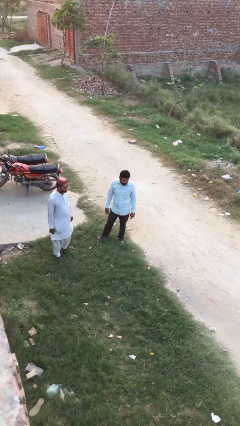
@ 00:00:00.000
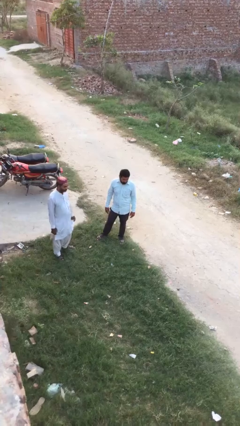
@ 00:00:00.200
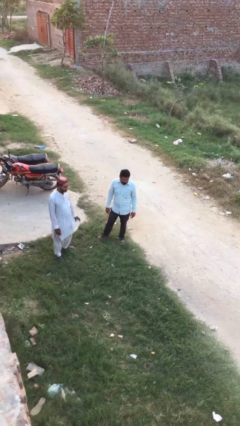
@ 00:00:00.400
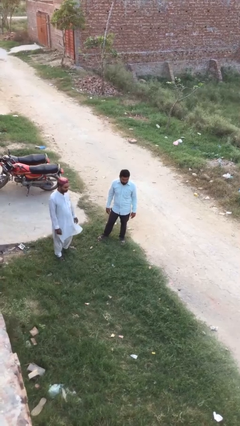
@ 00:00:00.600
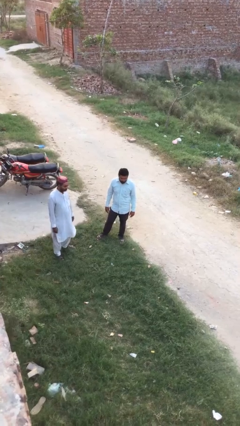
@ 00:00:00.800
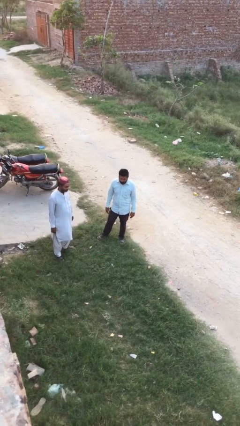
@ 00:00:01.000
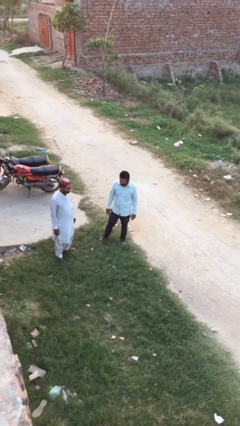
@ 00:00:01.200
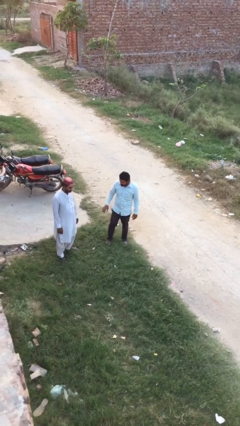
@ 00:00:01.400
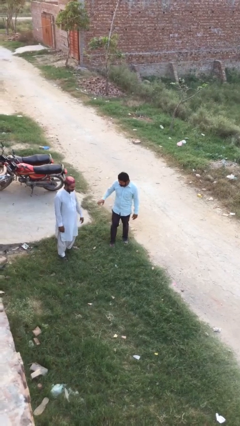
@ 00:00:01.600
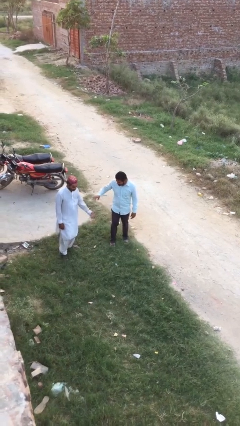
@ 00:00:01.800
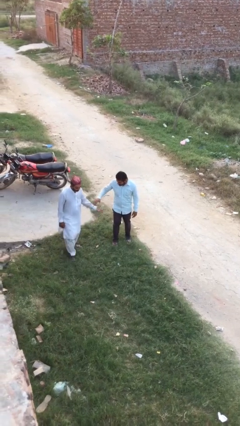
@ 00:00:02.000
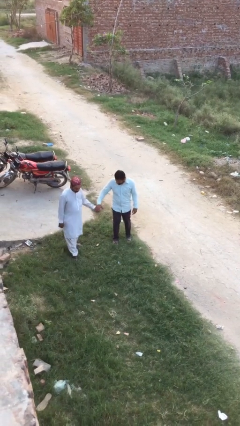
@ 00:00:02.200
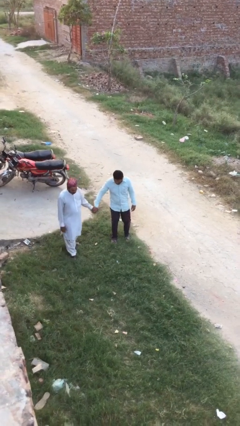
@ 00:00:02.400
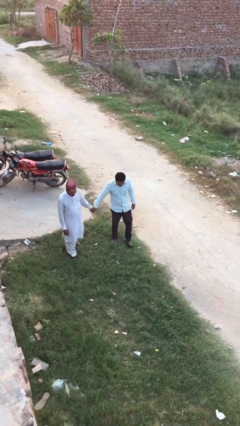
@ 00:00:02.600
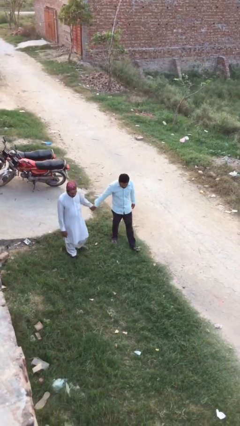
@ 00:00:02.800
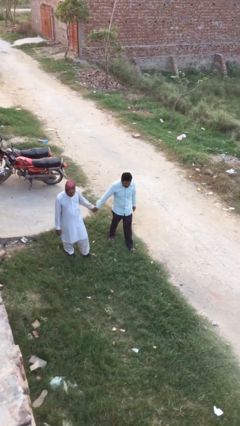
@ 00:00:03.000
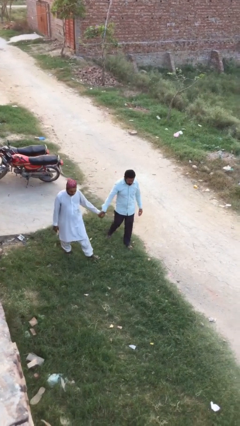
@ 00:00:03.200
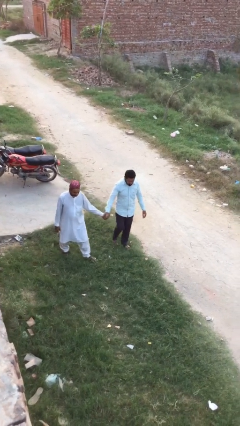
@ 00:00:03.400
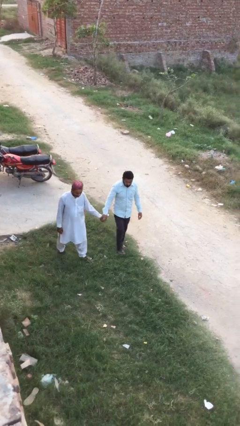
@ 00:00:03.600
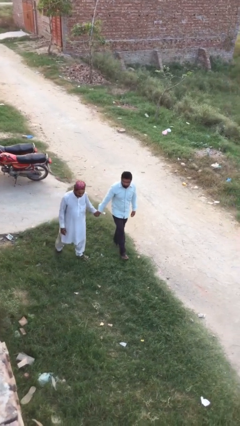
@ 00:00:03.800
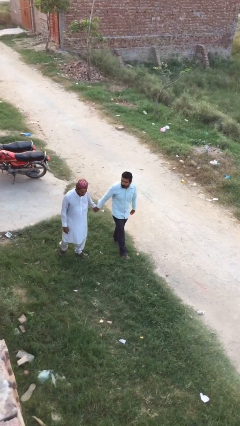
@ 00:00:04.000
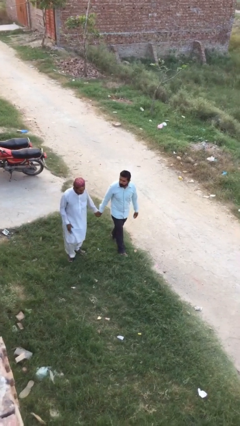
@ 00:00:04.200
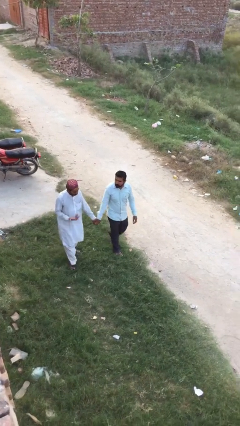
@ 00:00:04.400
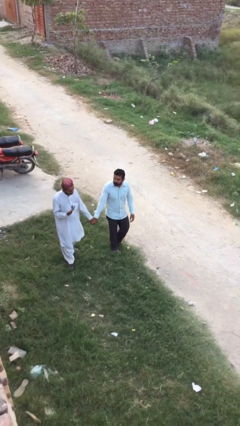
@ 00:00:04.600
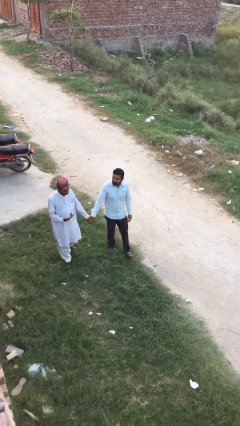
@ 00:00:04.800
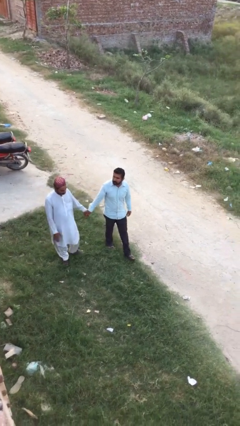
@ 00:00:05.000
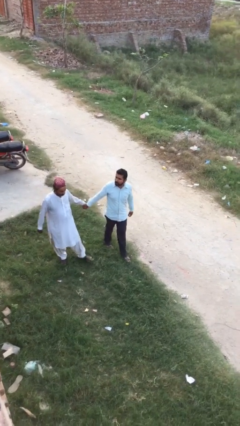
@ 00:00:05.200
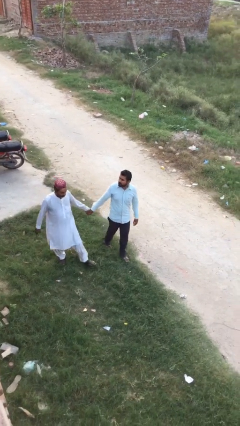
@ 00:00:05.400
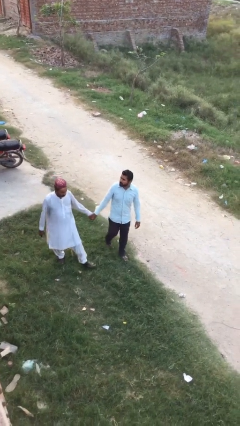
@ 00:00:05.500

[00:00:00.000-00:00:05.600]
person holds hand

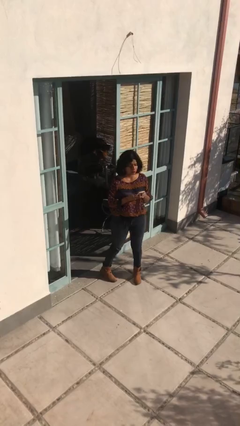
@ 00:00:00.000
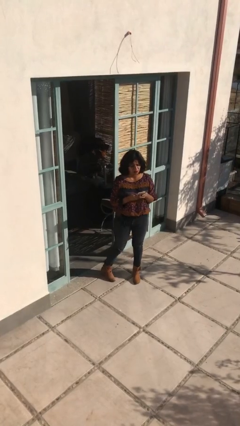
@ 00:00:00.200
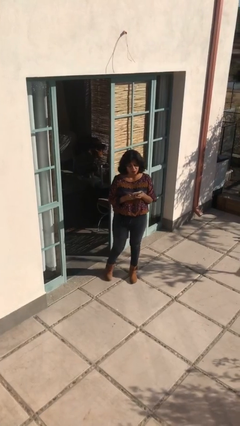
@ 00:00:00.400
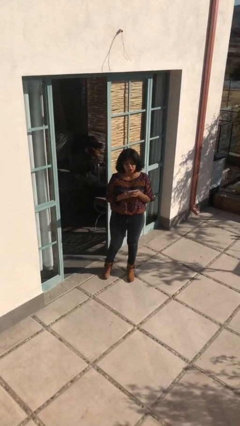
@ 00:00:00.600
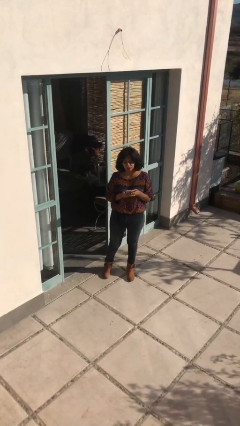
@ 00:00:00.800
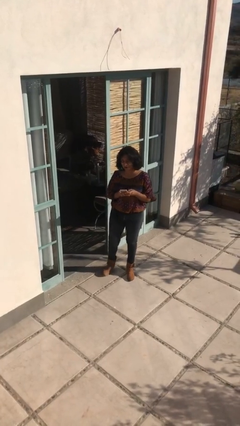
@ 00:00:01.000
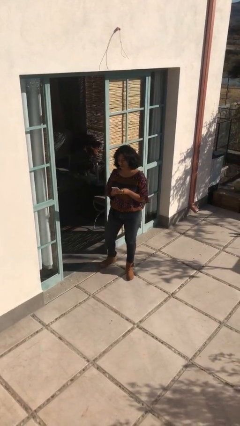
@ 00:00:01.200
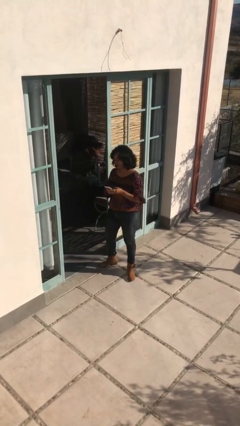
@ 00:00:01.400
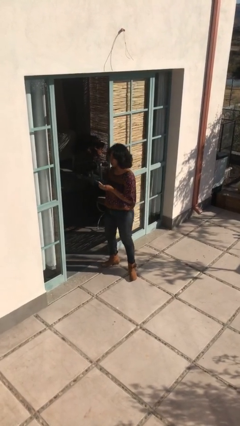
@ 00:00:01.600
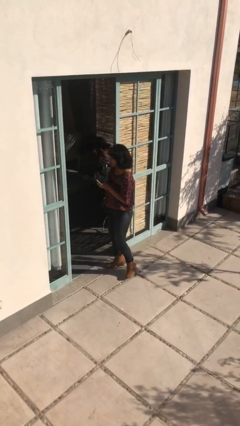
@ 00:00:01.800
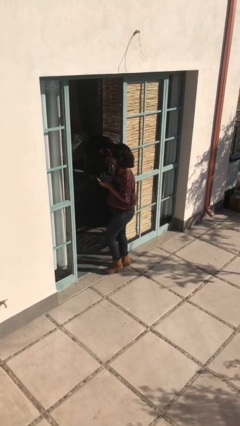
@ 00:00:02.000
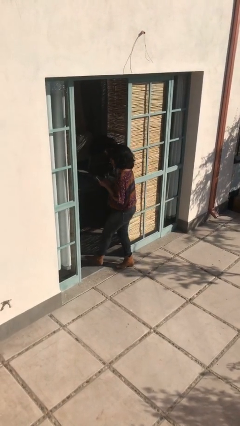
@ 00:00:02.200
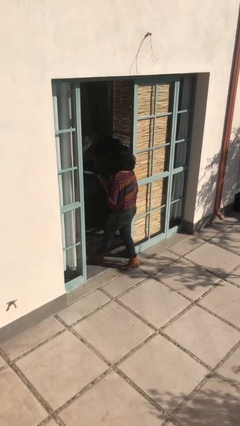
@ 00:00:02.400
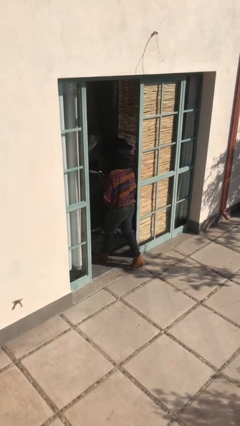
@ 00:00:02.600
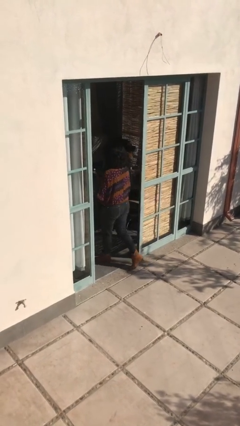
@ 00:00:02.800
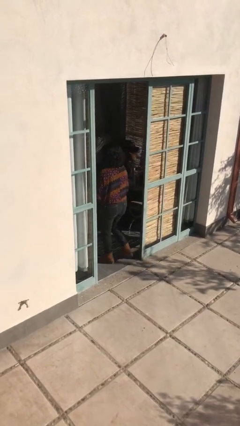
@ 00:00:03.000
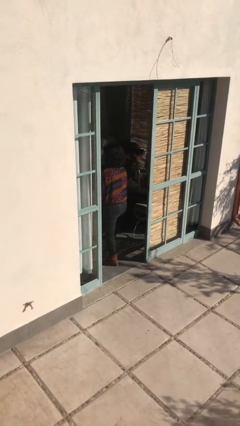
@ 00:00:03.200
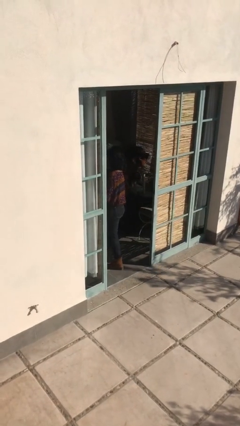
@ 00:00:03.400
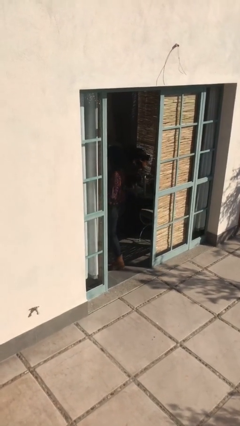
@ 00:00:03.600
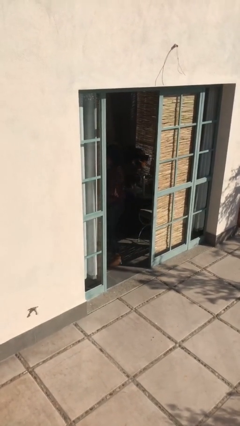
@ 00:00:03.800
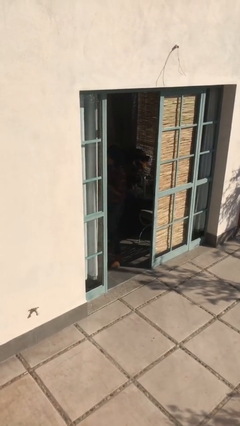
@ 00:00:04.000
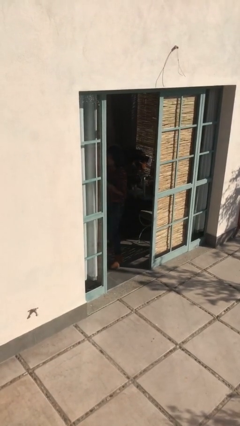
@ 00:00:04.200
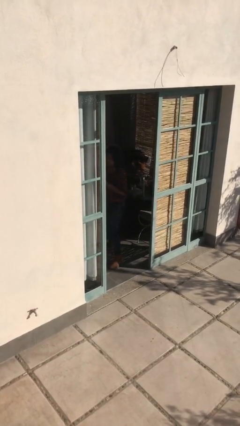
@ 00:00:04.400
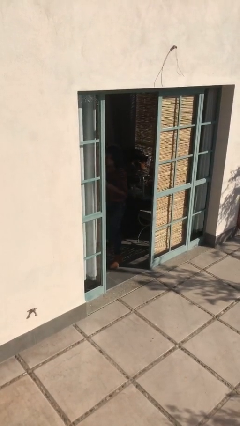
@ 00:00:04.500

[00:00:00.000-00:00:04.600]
person exits scene through structure

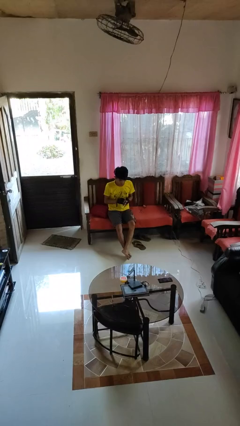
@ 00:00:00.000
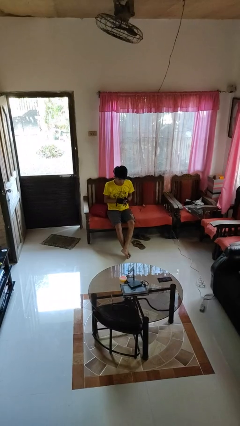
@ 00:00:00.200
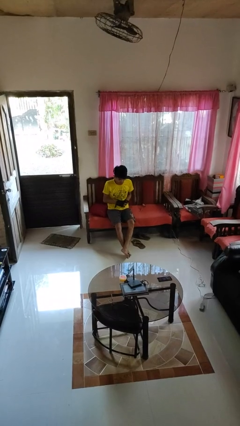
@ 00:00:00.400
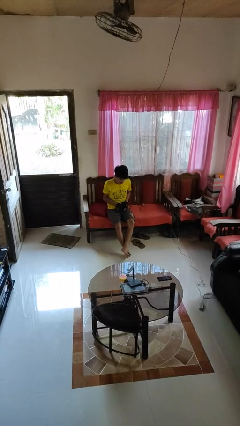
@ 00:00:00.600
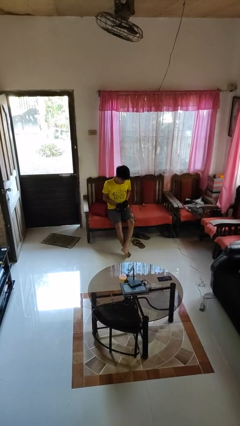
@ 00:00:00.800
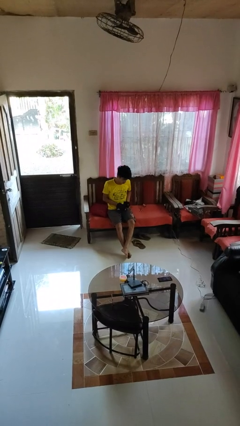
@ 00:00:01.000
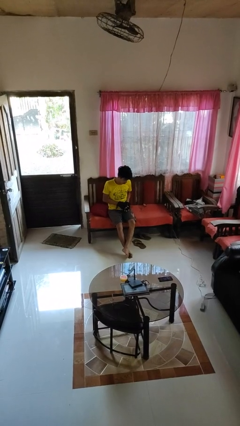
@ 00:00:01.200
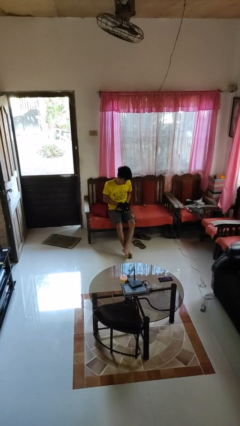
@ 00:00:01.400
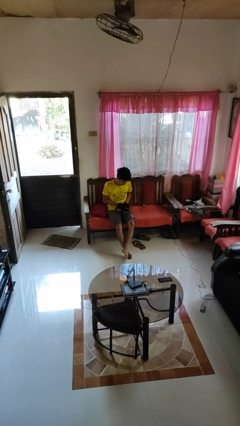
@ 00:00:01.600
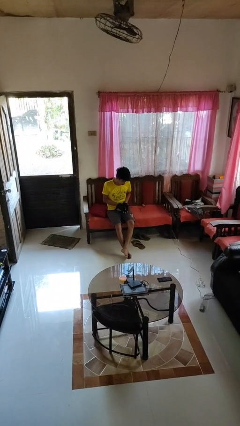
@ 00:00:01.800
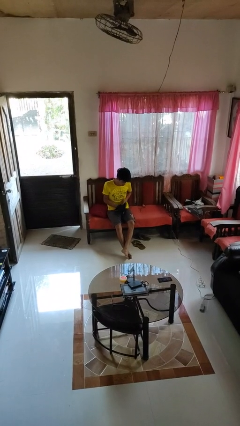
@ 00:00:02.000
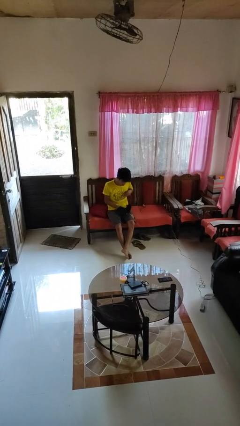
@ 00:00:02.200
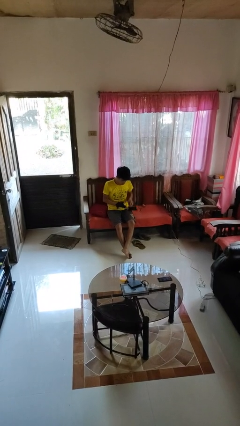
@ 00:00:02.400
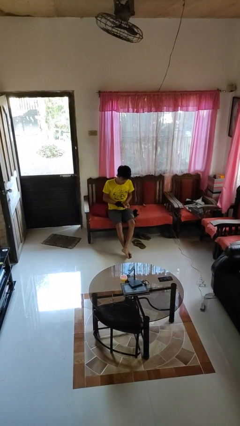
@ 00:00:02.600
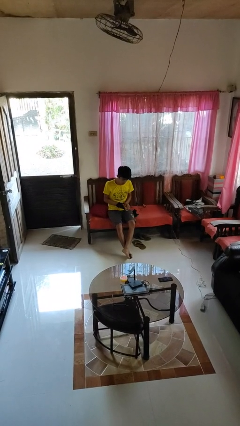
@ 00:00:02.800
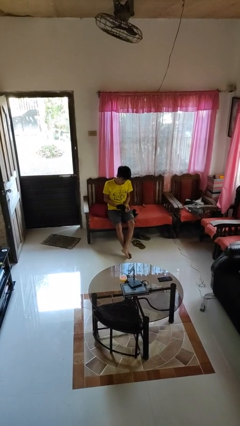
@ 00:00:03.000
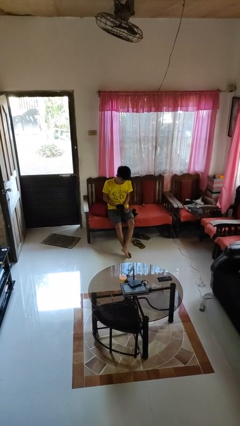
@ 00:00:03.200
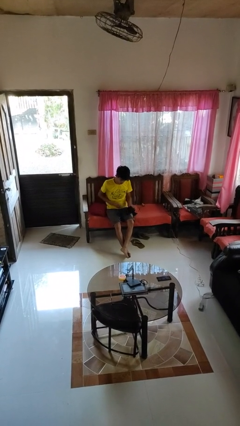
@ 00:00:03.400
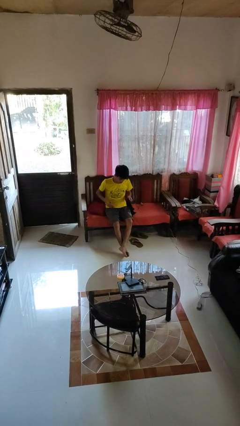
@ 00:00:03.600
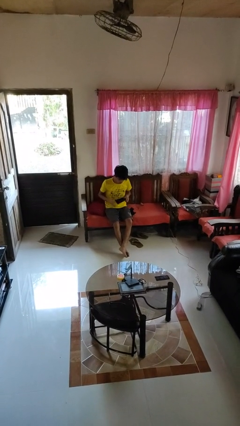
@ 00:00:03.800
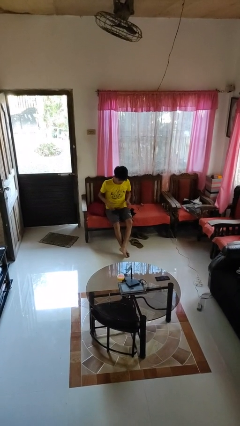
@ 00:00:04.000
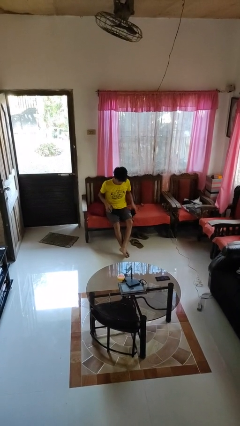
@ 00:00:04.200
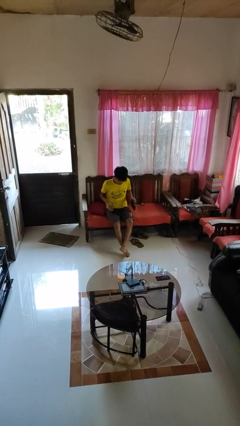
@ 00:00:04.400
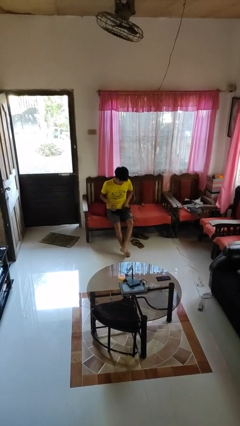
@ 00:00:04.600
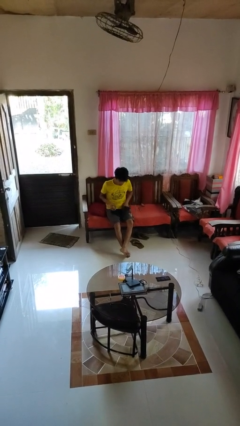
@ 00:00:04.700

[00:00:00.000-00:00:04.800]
person takes off gloves

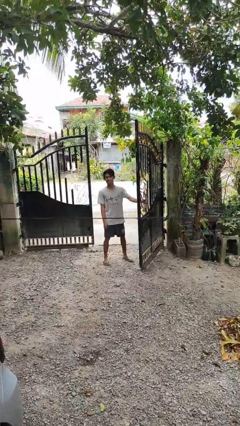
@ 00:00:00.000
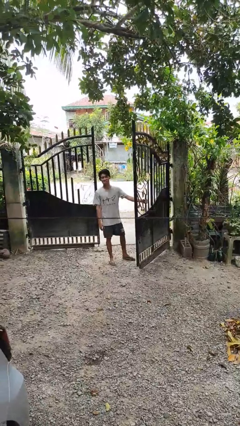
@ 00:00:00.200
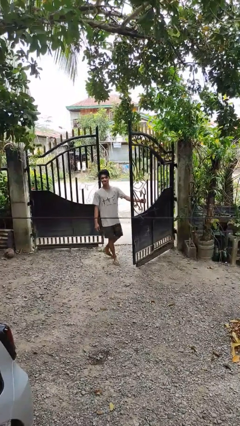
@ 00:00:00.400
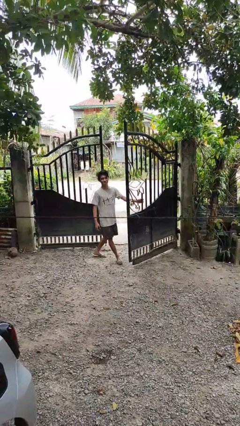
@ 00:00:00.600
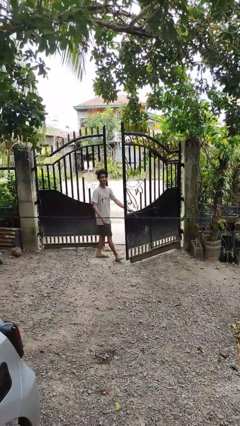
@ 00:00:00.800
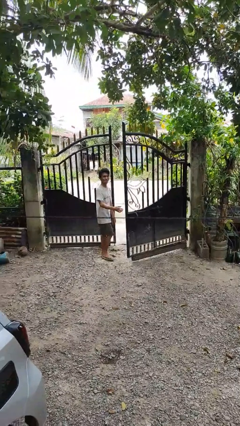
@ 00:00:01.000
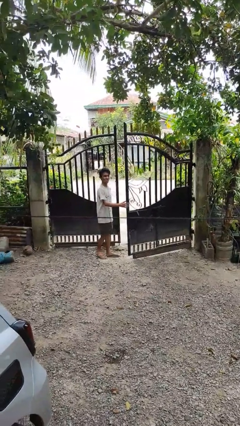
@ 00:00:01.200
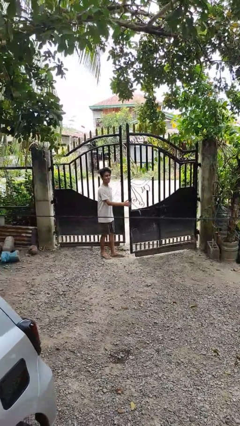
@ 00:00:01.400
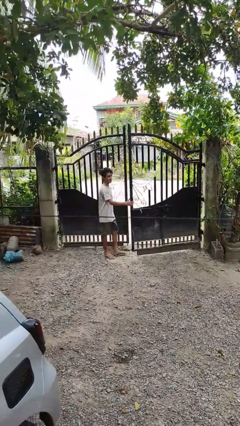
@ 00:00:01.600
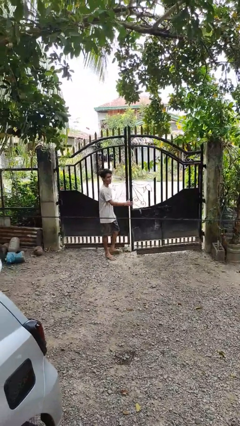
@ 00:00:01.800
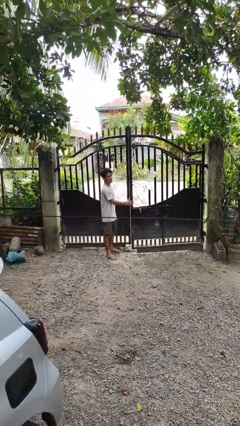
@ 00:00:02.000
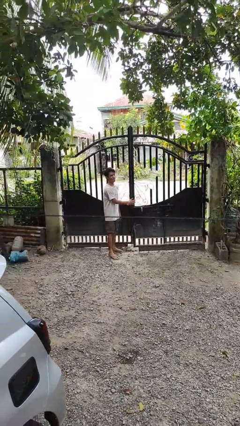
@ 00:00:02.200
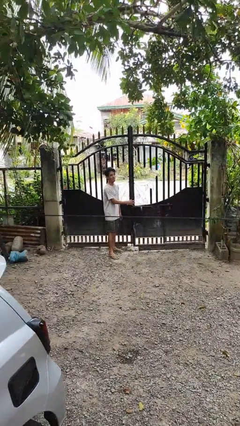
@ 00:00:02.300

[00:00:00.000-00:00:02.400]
person closes gate

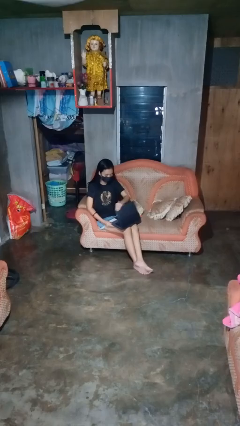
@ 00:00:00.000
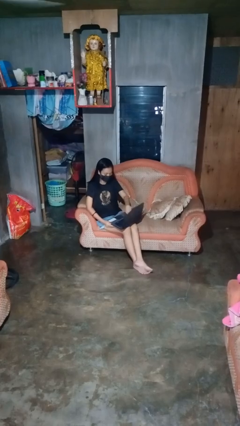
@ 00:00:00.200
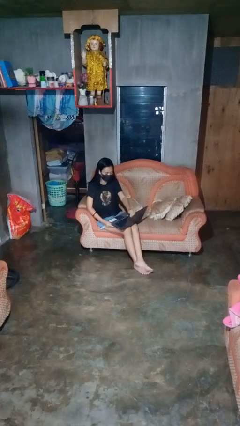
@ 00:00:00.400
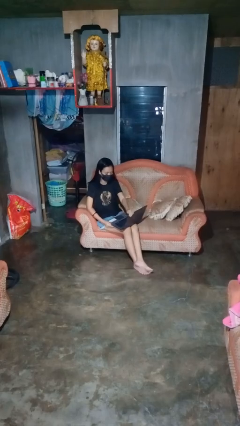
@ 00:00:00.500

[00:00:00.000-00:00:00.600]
person opens laptop
